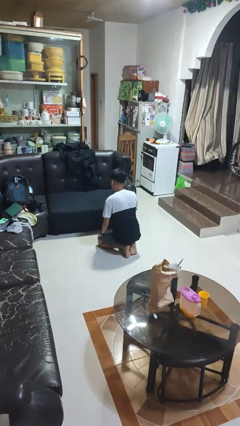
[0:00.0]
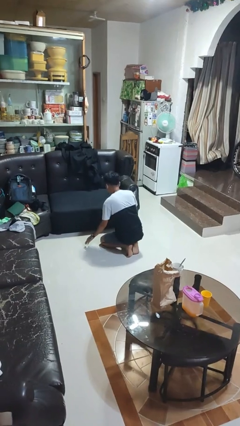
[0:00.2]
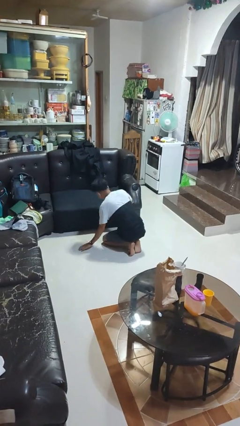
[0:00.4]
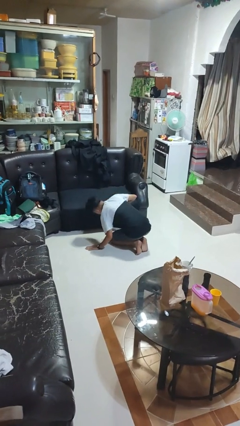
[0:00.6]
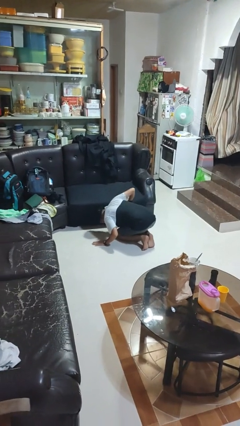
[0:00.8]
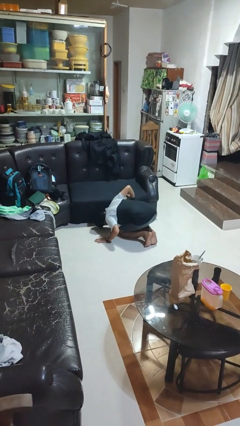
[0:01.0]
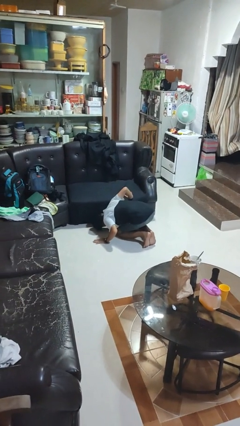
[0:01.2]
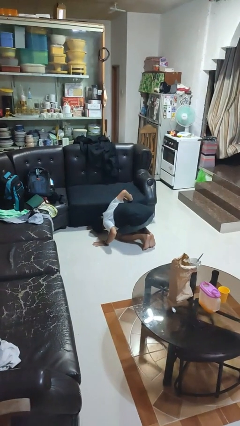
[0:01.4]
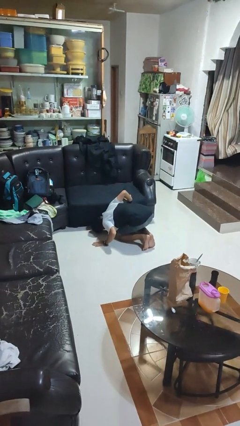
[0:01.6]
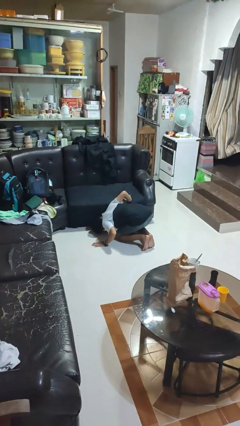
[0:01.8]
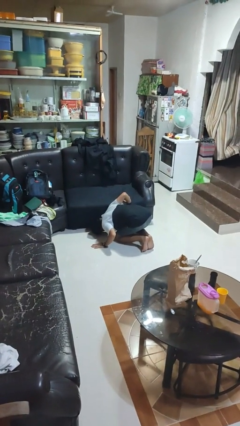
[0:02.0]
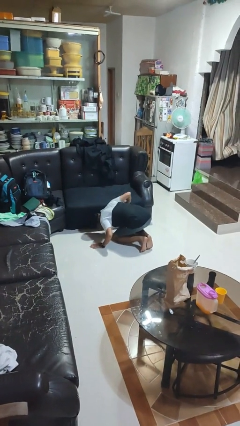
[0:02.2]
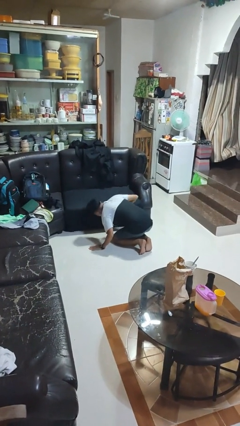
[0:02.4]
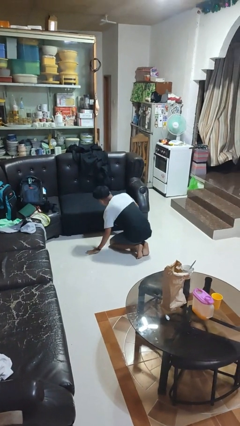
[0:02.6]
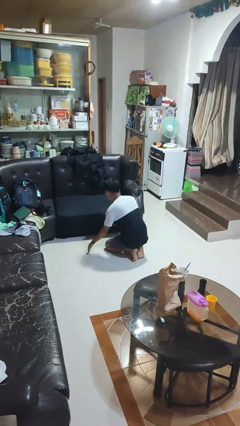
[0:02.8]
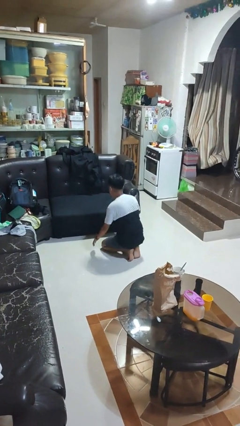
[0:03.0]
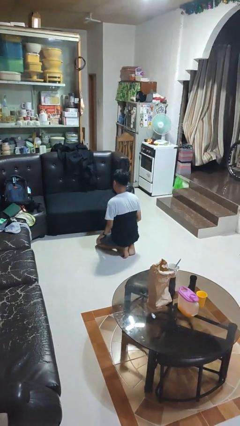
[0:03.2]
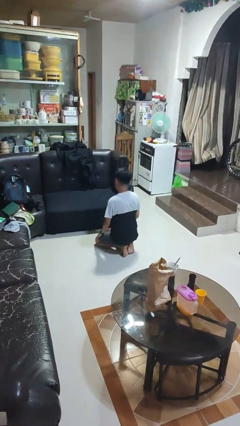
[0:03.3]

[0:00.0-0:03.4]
person searches under couch

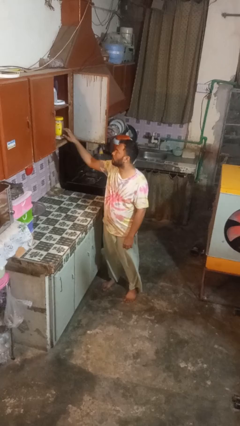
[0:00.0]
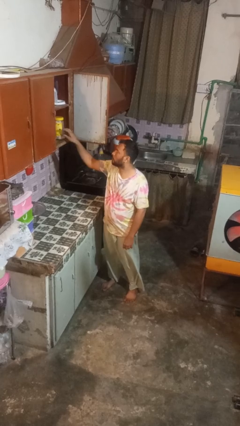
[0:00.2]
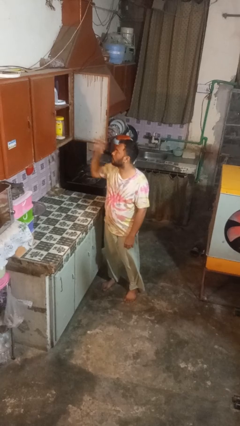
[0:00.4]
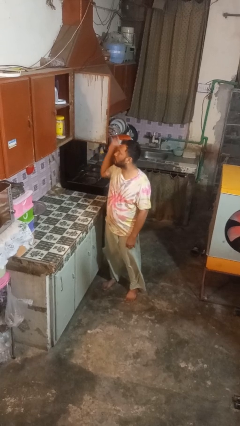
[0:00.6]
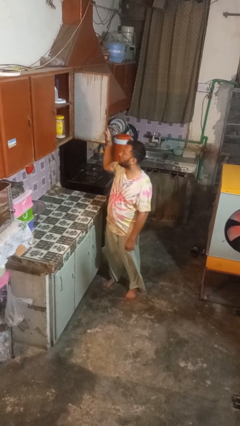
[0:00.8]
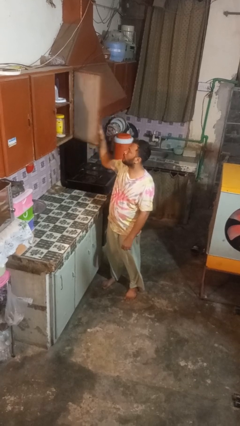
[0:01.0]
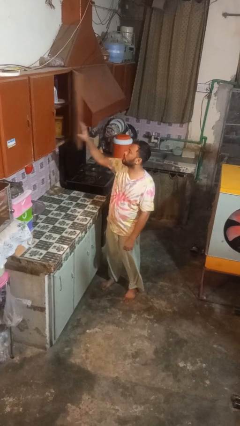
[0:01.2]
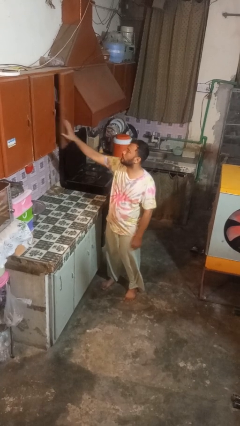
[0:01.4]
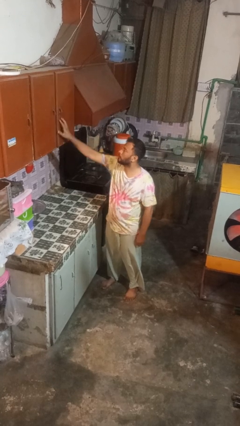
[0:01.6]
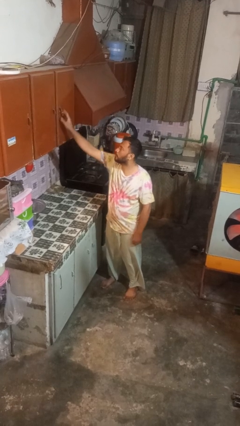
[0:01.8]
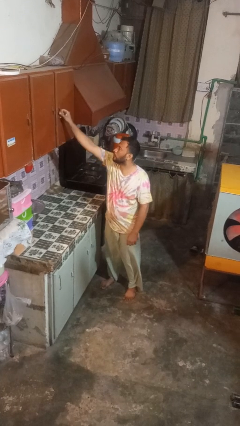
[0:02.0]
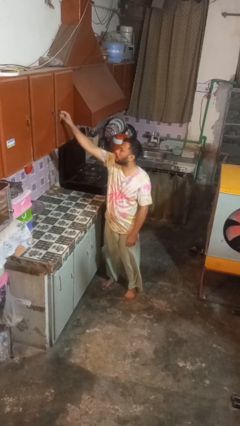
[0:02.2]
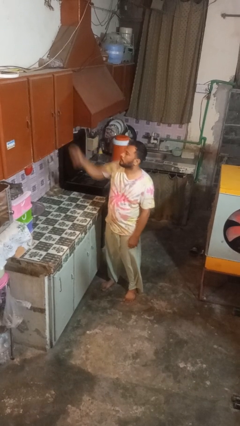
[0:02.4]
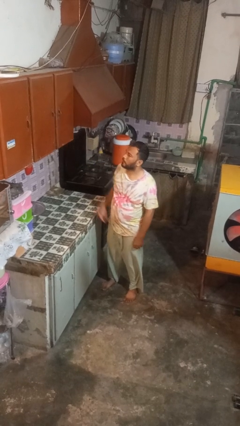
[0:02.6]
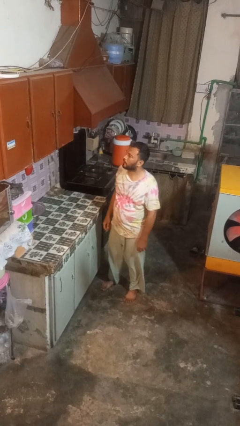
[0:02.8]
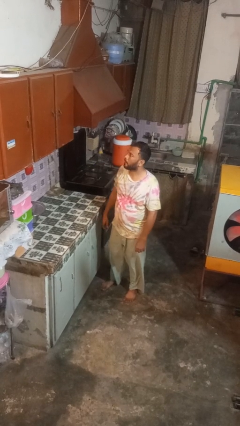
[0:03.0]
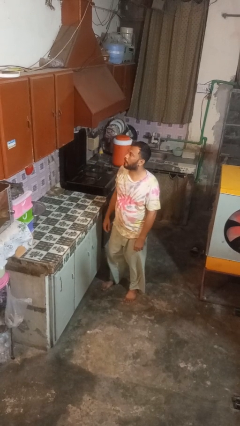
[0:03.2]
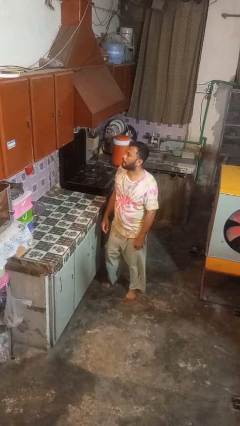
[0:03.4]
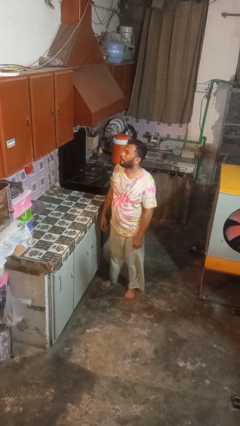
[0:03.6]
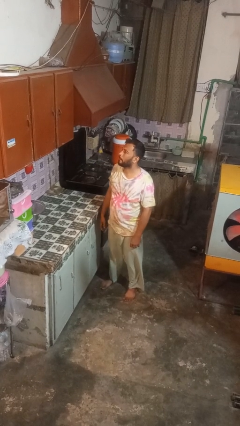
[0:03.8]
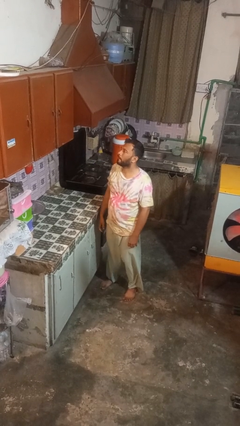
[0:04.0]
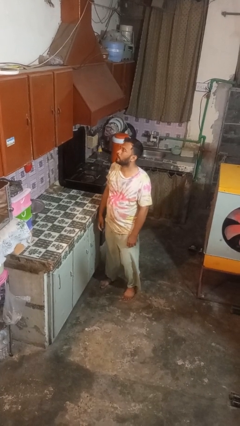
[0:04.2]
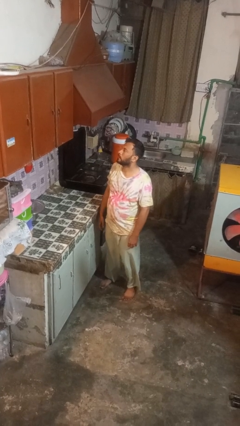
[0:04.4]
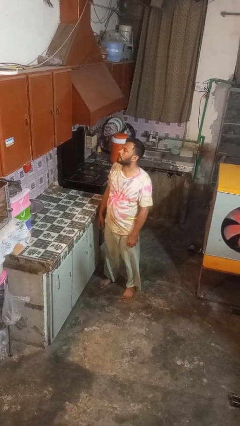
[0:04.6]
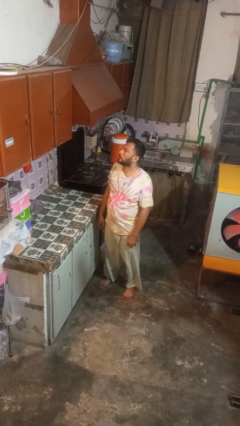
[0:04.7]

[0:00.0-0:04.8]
person closes cabinet

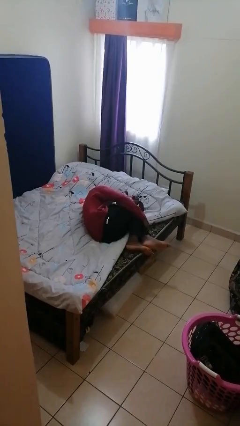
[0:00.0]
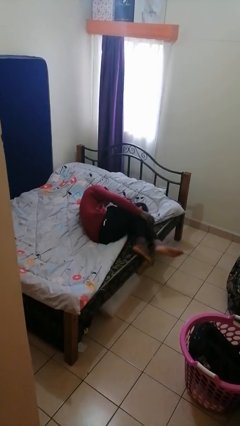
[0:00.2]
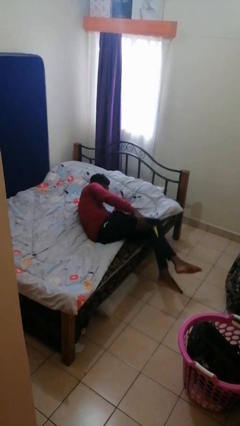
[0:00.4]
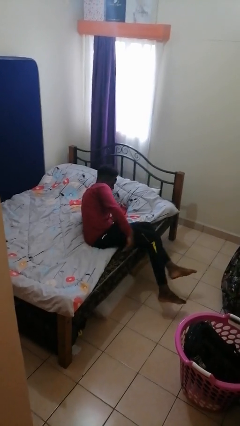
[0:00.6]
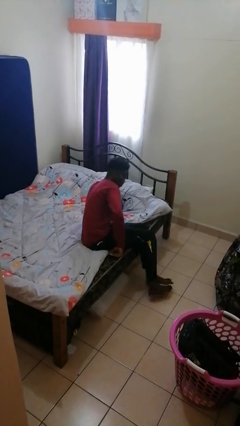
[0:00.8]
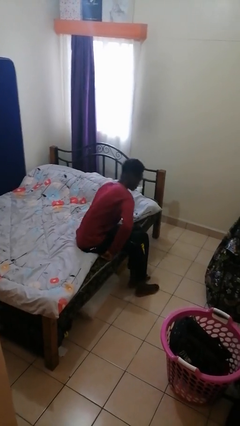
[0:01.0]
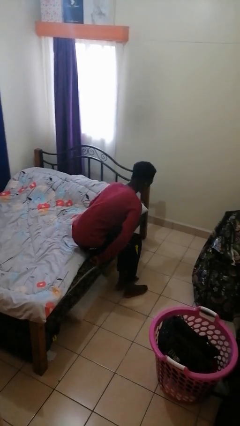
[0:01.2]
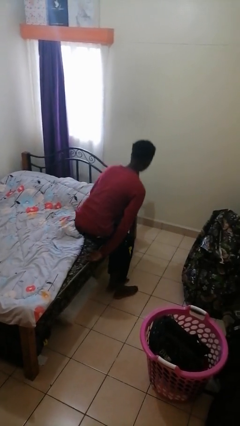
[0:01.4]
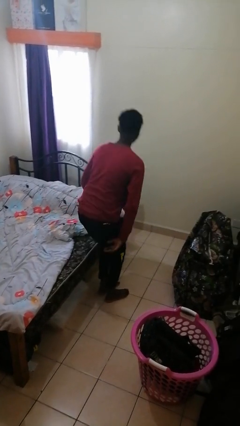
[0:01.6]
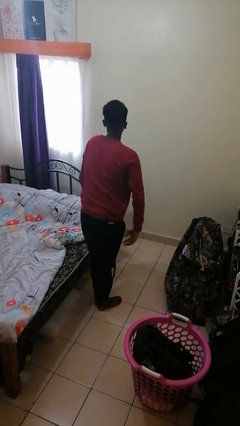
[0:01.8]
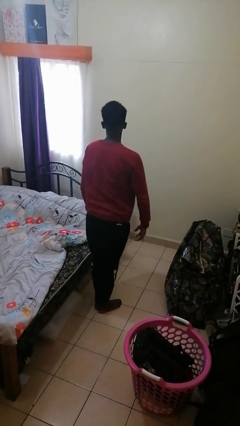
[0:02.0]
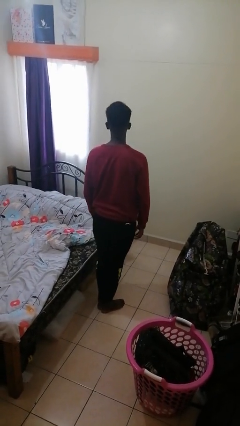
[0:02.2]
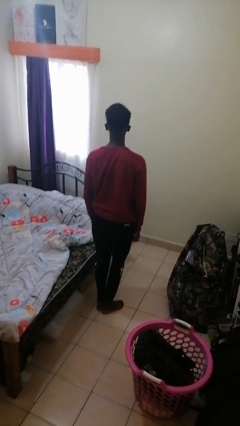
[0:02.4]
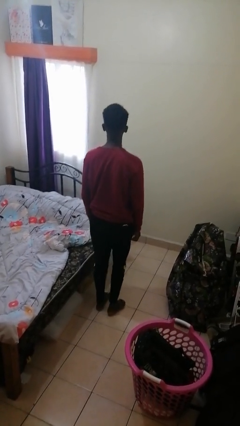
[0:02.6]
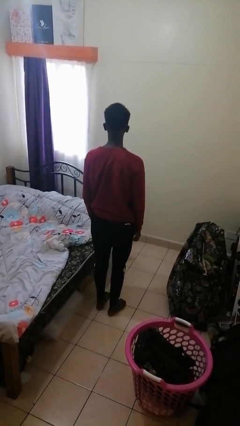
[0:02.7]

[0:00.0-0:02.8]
person stands up

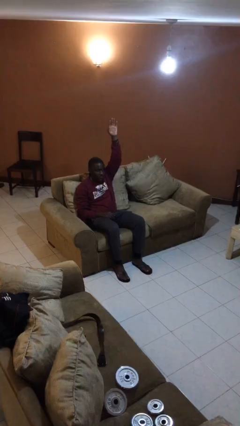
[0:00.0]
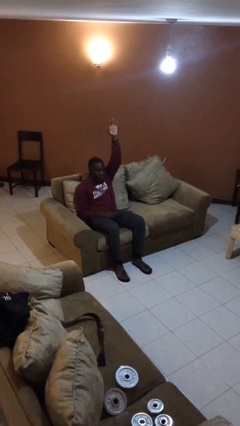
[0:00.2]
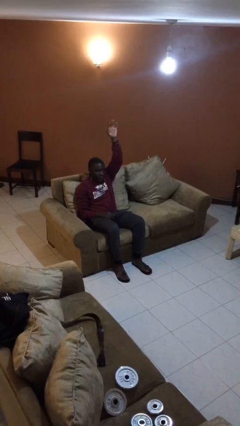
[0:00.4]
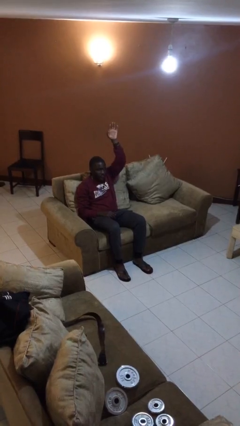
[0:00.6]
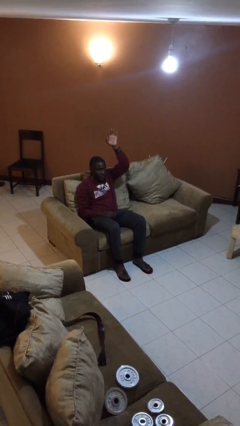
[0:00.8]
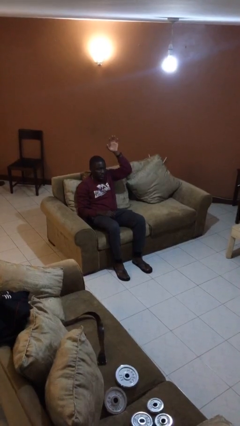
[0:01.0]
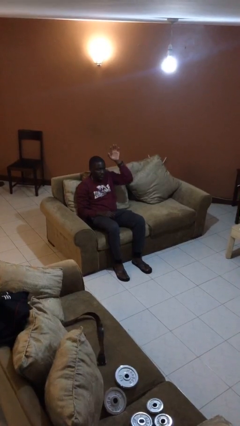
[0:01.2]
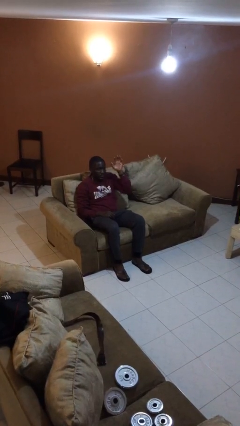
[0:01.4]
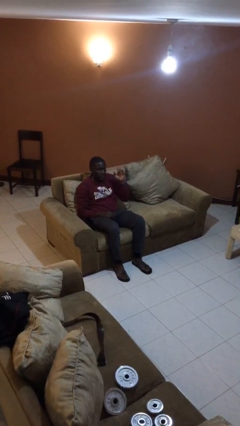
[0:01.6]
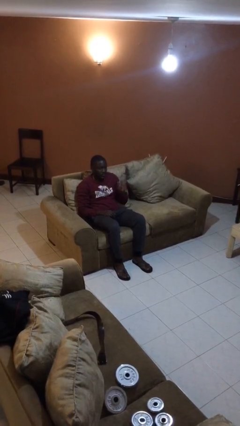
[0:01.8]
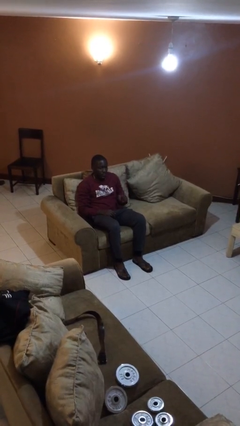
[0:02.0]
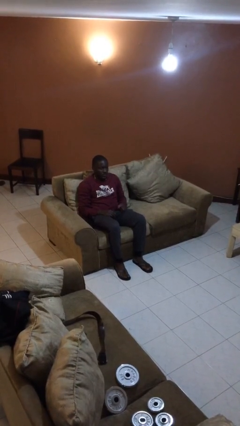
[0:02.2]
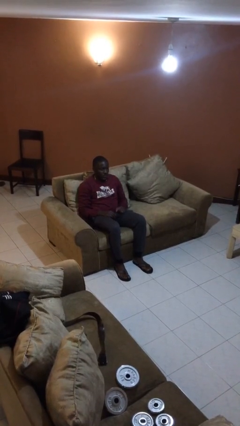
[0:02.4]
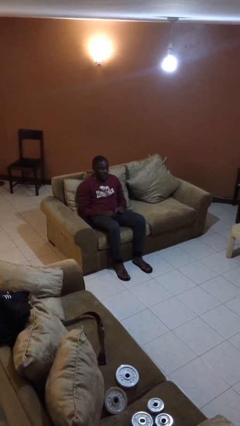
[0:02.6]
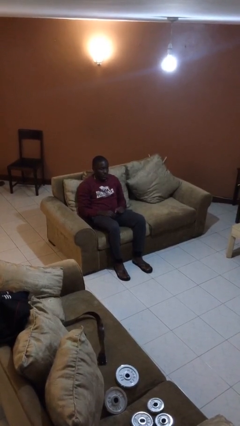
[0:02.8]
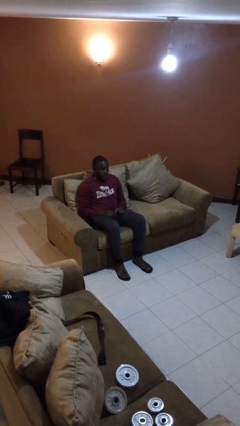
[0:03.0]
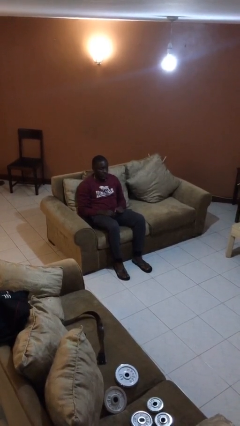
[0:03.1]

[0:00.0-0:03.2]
person gestures lower hand

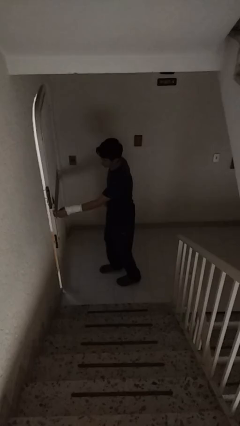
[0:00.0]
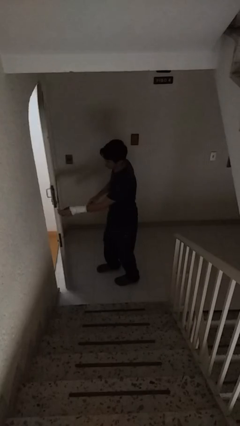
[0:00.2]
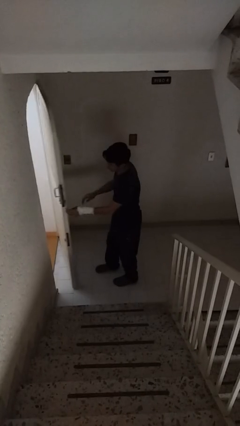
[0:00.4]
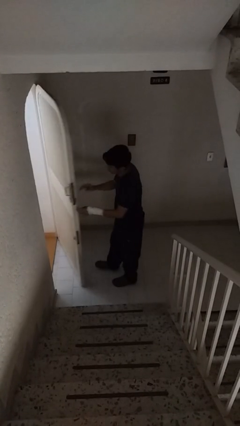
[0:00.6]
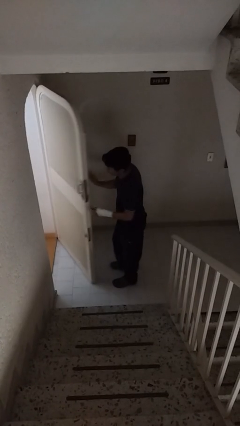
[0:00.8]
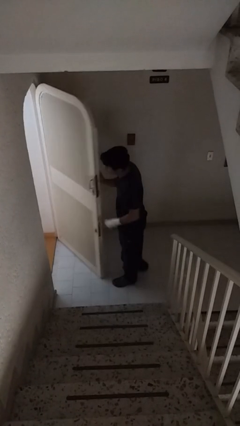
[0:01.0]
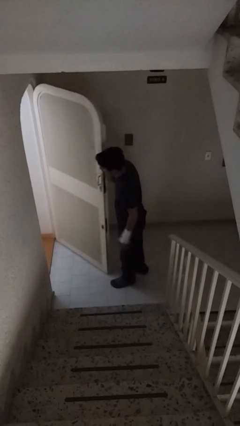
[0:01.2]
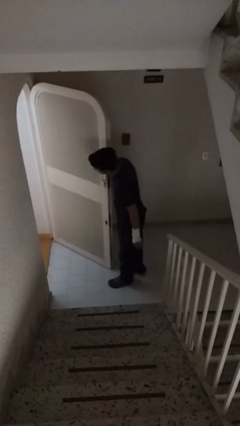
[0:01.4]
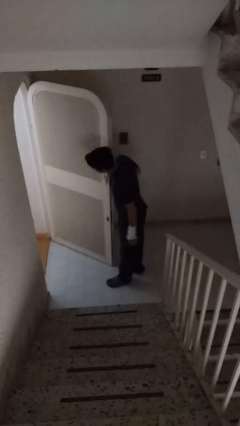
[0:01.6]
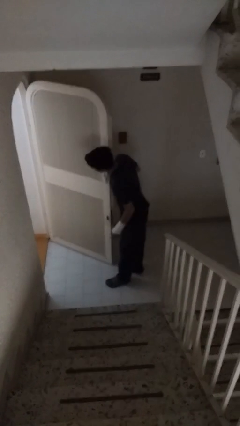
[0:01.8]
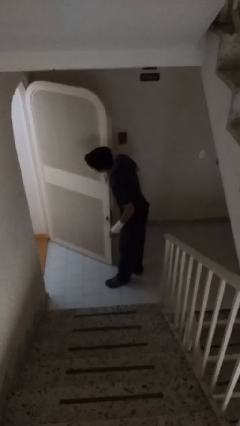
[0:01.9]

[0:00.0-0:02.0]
person opens facility door

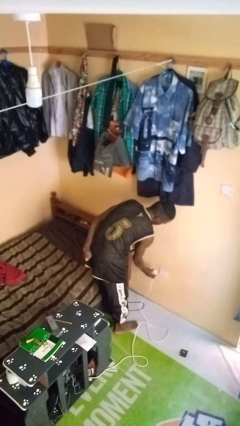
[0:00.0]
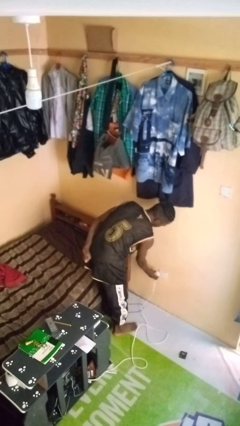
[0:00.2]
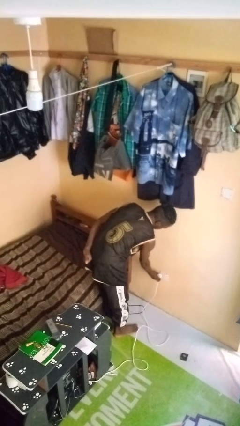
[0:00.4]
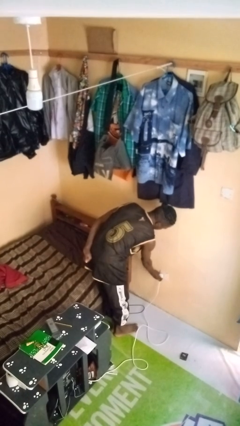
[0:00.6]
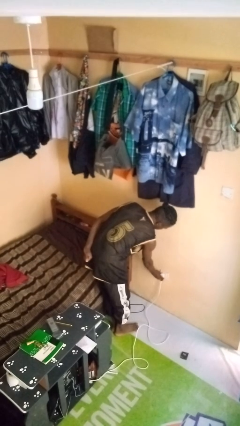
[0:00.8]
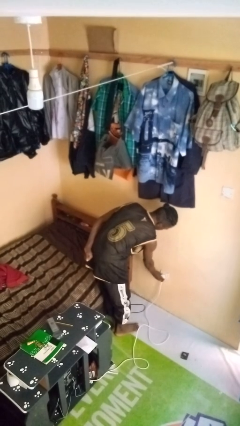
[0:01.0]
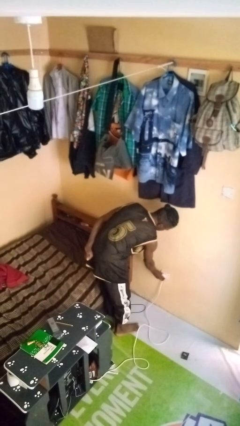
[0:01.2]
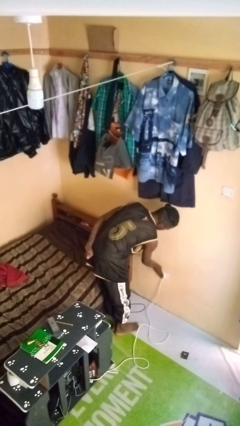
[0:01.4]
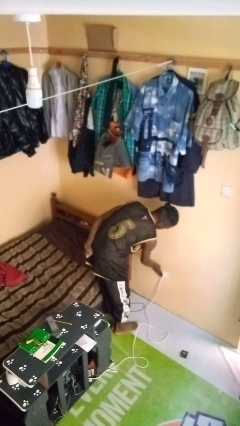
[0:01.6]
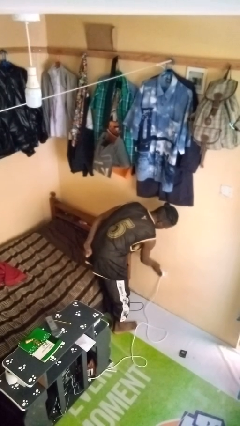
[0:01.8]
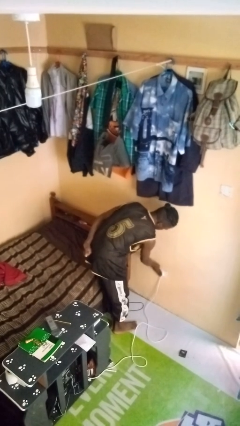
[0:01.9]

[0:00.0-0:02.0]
person plugs into electrical socket
